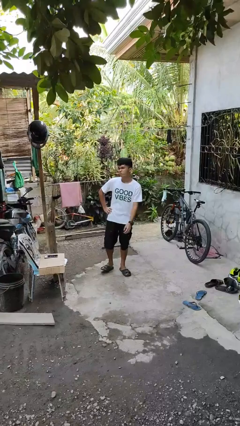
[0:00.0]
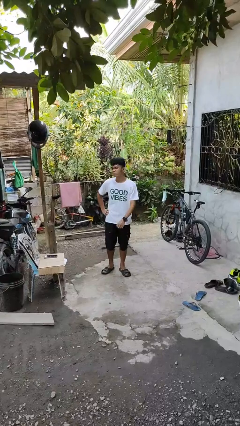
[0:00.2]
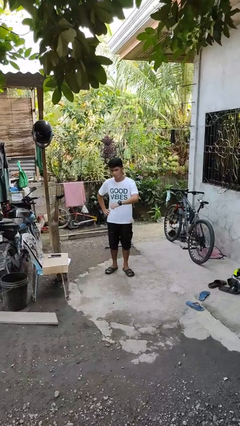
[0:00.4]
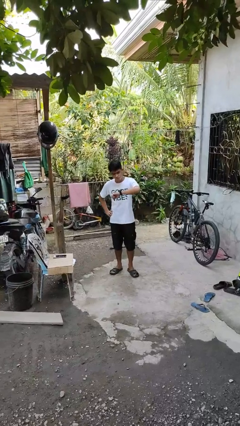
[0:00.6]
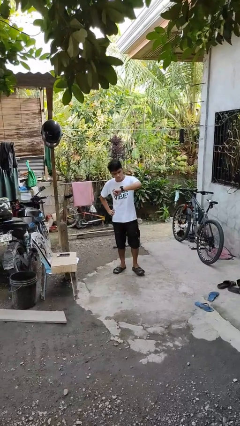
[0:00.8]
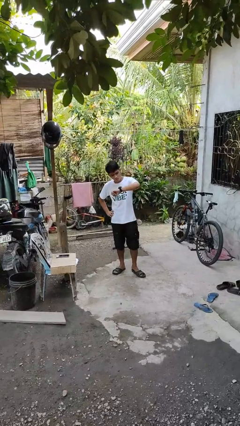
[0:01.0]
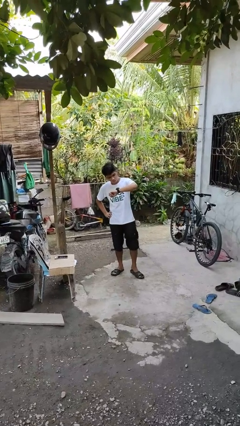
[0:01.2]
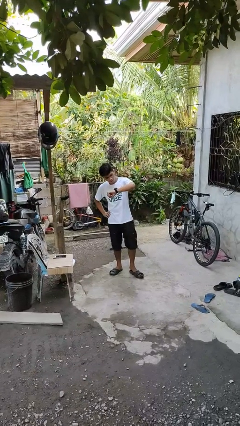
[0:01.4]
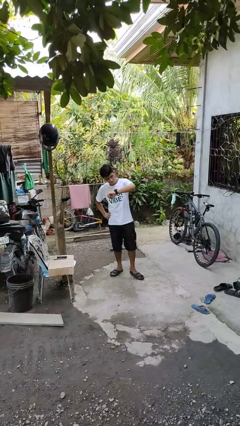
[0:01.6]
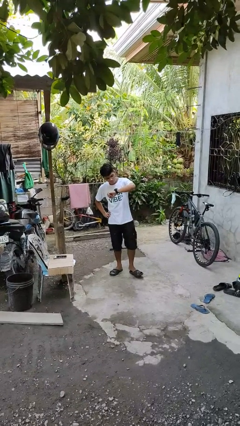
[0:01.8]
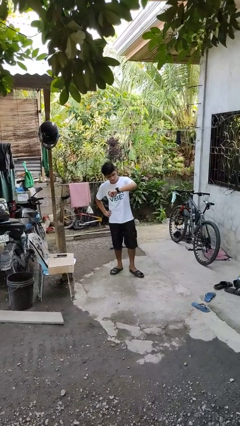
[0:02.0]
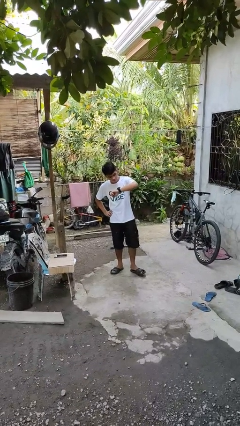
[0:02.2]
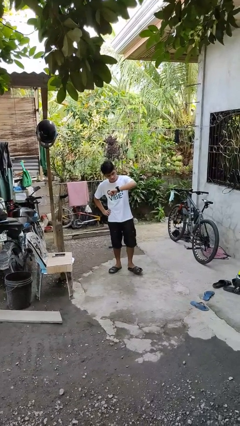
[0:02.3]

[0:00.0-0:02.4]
person looks at wristwatch

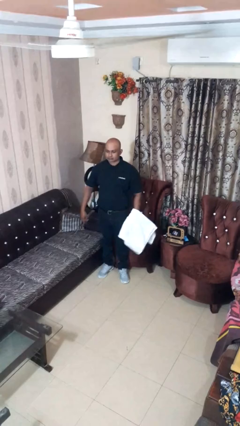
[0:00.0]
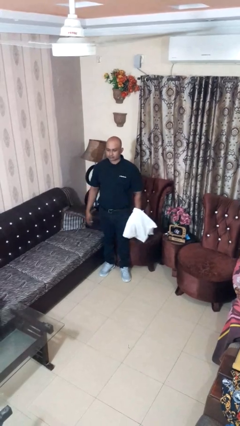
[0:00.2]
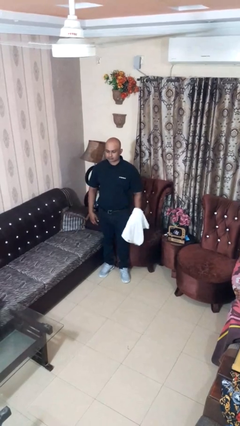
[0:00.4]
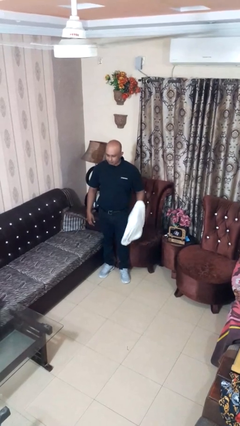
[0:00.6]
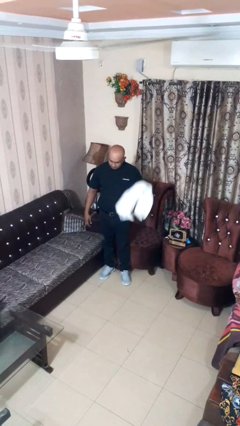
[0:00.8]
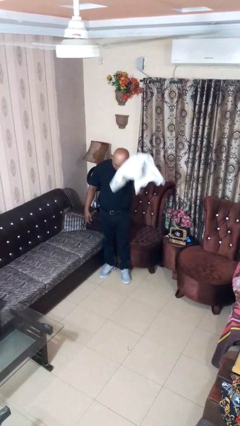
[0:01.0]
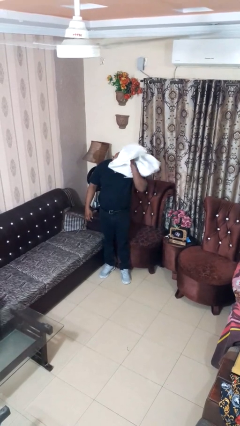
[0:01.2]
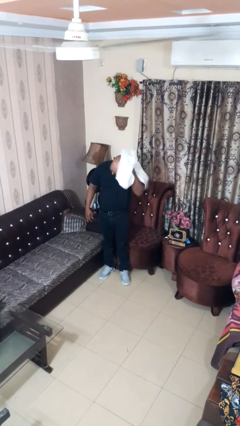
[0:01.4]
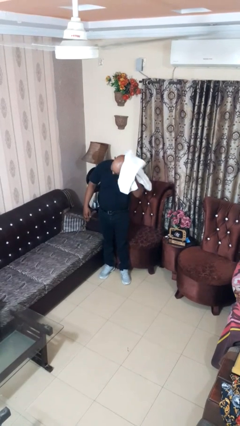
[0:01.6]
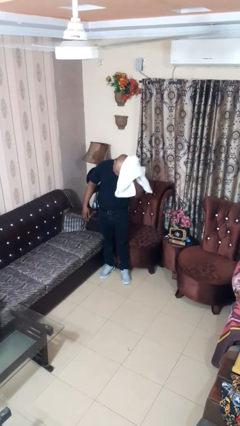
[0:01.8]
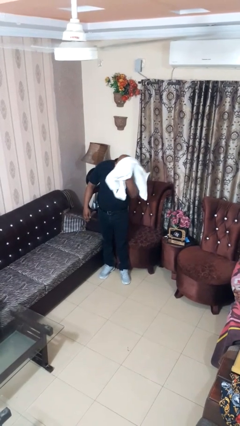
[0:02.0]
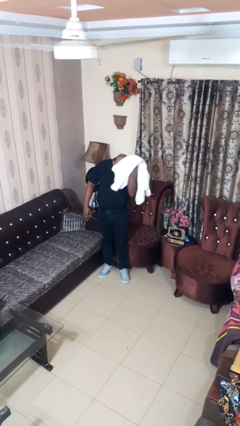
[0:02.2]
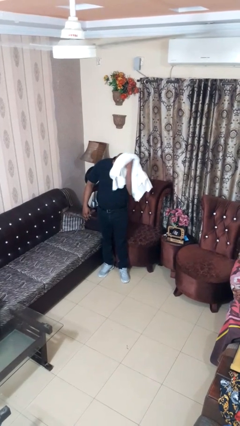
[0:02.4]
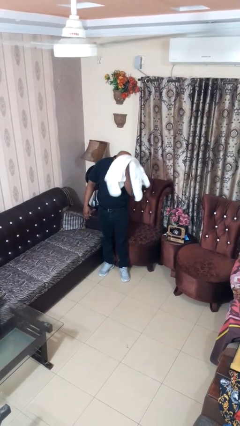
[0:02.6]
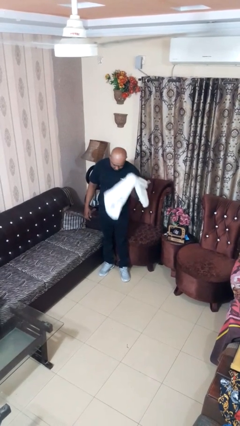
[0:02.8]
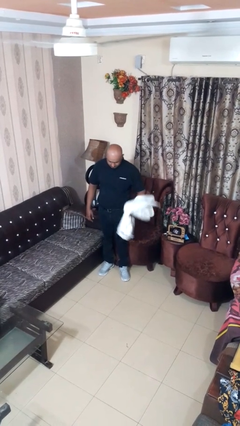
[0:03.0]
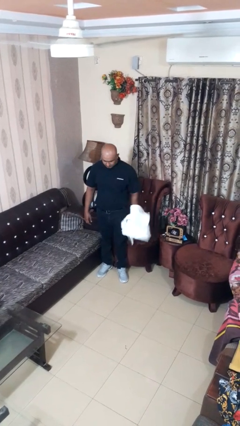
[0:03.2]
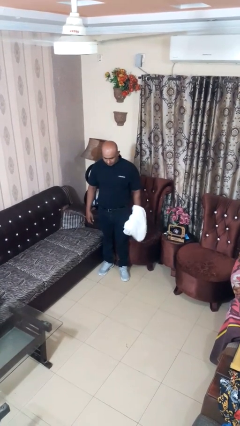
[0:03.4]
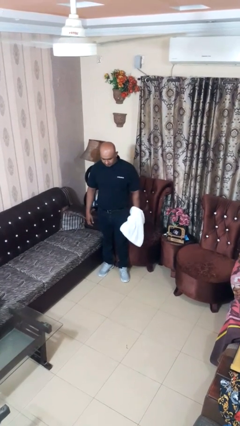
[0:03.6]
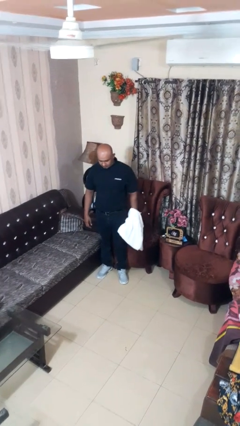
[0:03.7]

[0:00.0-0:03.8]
person dries hair with towel

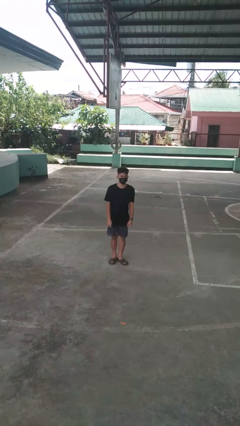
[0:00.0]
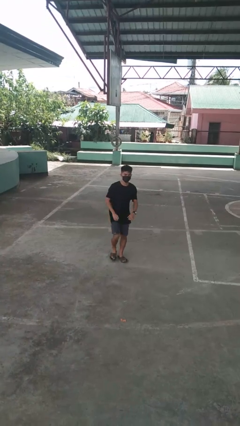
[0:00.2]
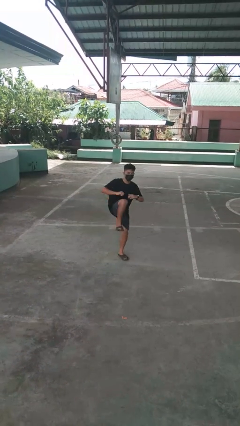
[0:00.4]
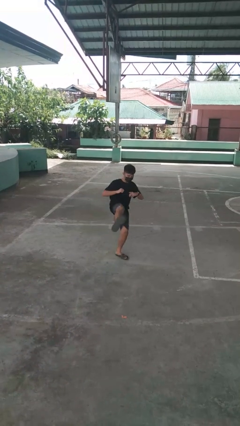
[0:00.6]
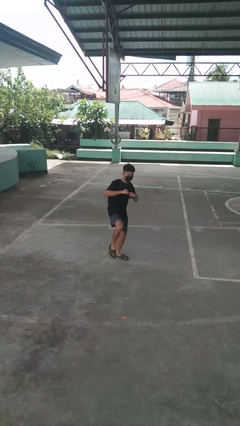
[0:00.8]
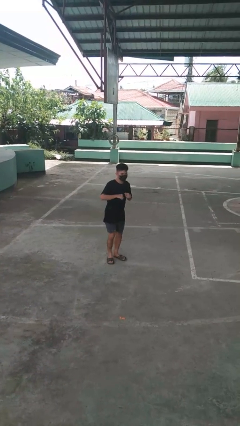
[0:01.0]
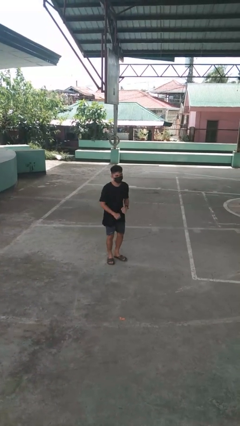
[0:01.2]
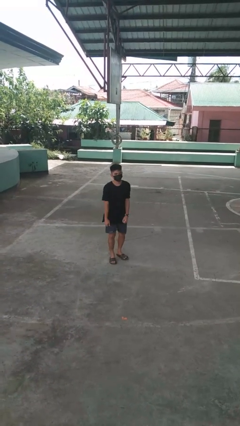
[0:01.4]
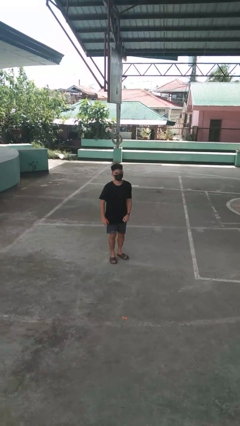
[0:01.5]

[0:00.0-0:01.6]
person karate kicks

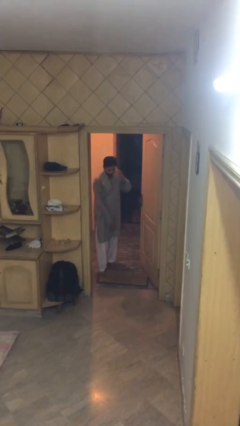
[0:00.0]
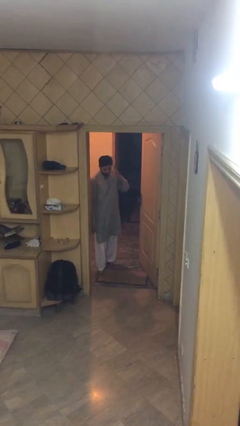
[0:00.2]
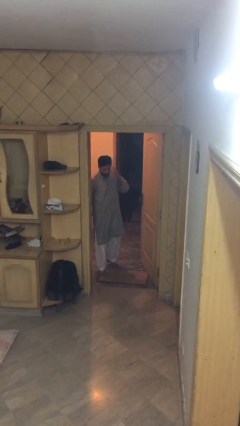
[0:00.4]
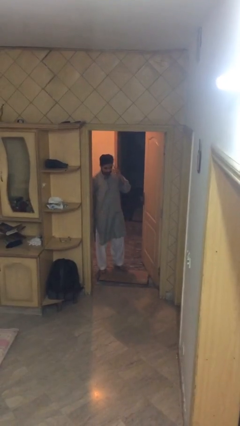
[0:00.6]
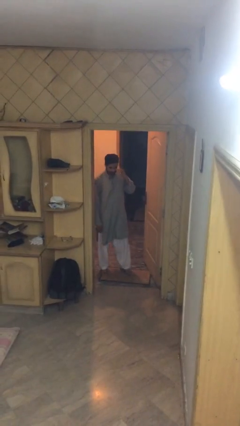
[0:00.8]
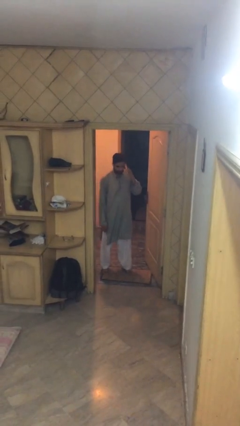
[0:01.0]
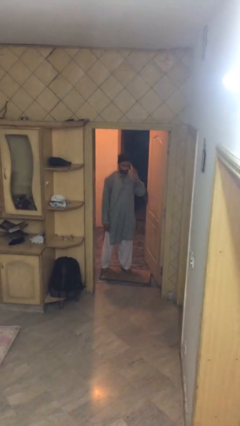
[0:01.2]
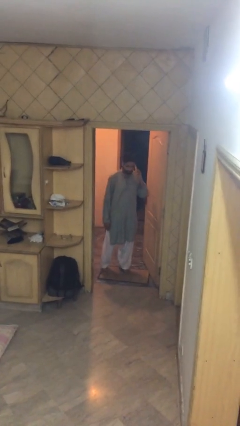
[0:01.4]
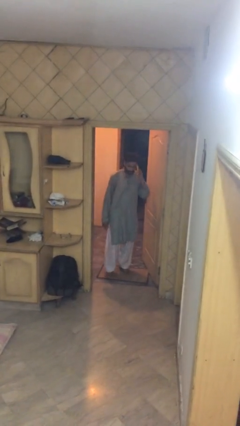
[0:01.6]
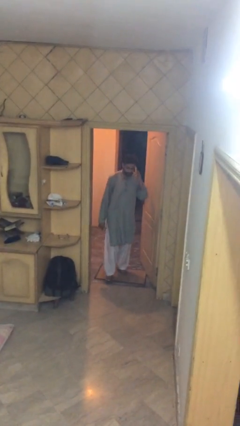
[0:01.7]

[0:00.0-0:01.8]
person enters scene through structure

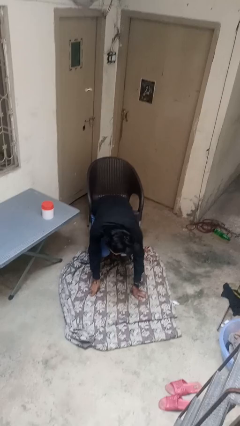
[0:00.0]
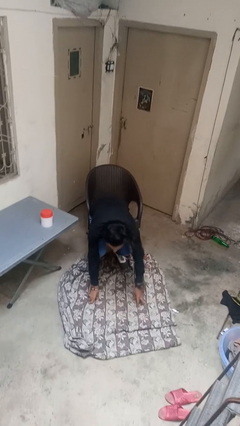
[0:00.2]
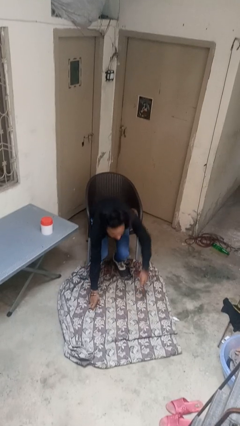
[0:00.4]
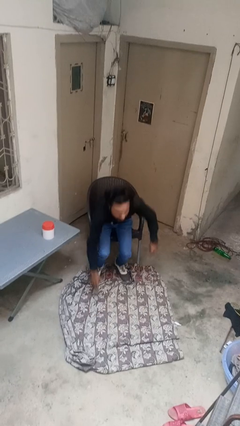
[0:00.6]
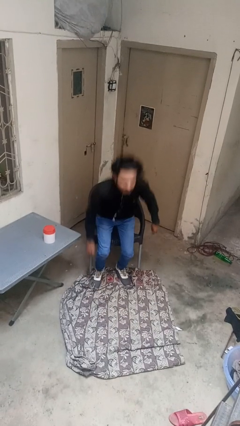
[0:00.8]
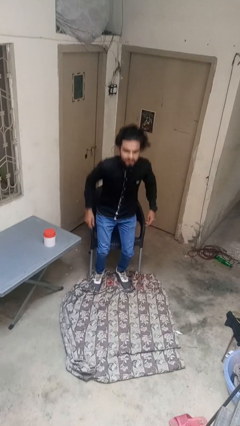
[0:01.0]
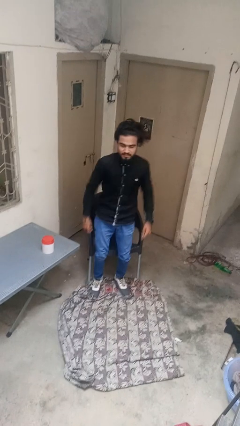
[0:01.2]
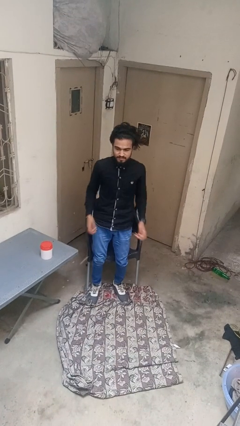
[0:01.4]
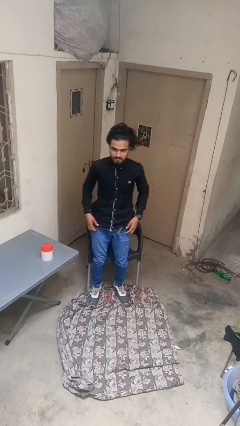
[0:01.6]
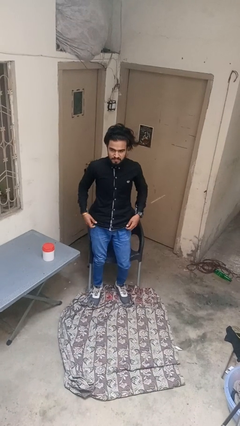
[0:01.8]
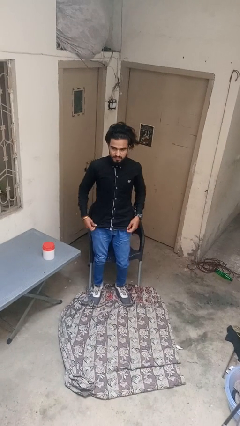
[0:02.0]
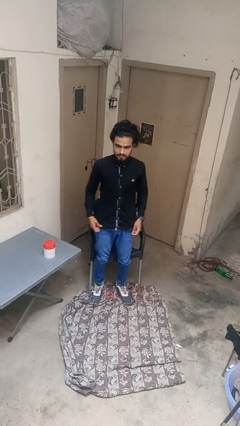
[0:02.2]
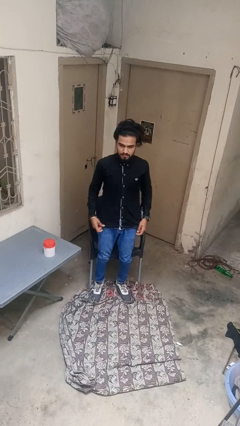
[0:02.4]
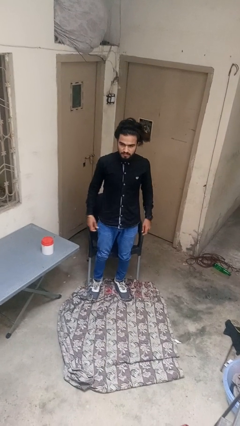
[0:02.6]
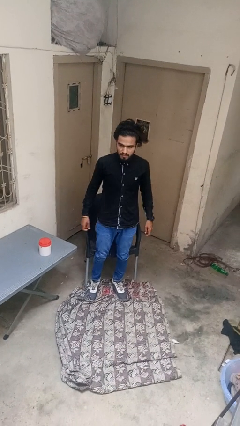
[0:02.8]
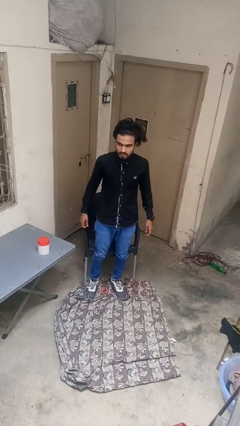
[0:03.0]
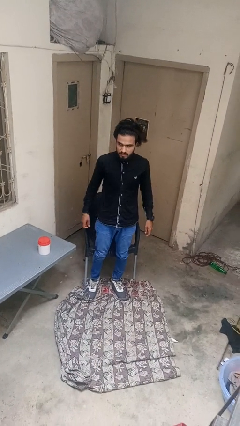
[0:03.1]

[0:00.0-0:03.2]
person stands up from floor

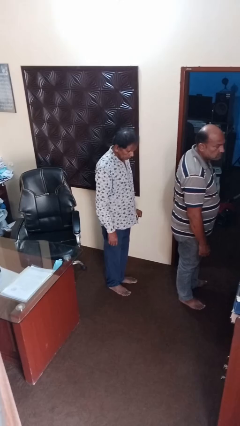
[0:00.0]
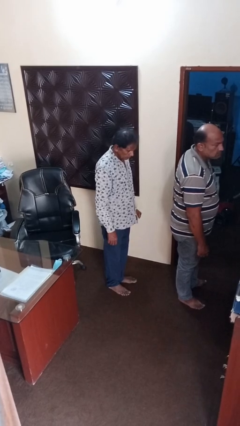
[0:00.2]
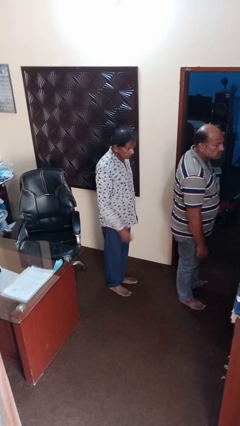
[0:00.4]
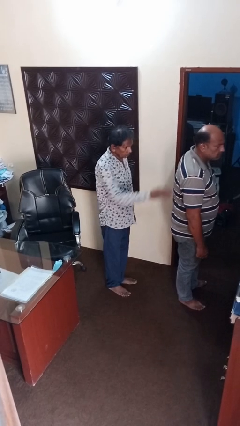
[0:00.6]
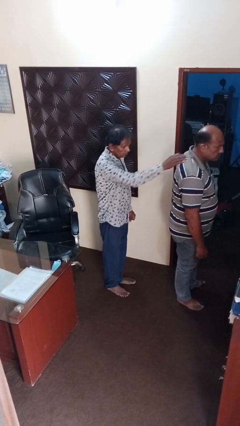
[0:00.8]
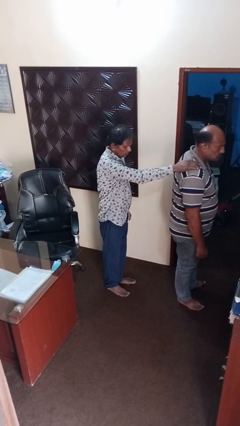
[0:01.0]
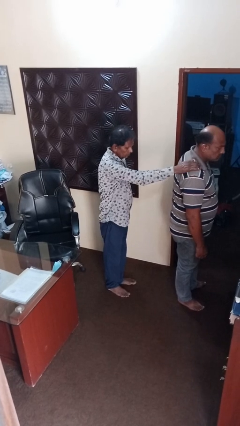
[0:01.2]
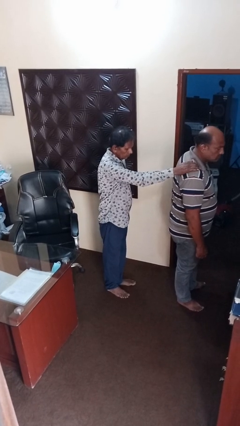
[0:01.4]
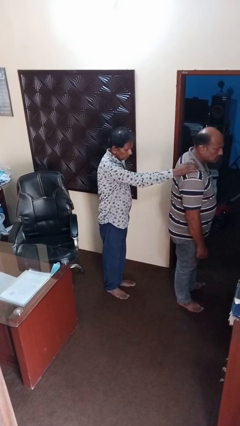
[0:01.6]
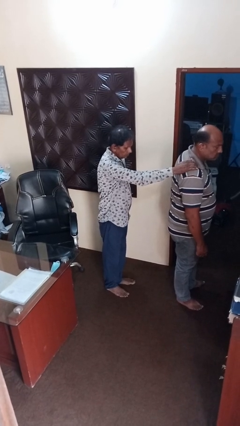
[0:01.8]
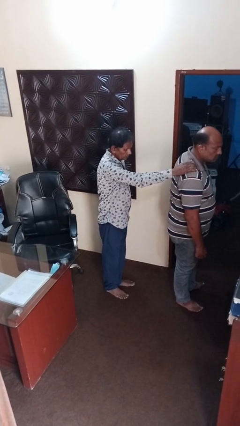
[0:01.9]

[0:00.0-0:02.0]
person grabs person by shoulder

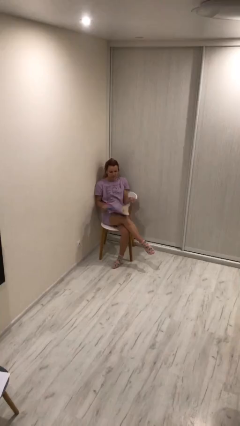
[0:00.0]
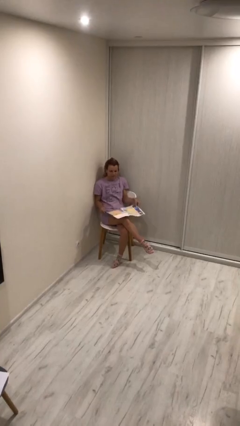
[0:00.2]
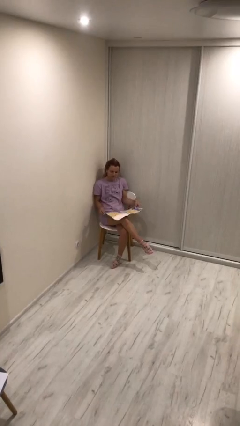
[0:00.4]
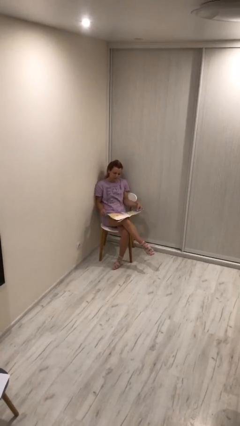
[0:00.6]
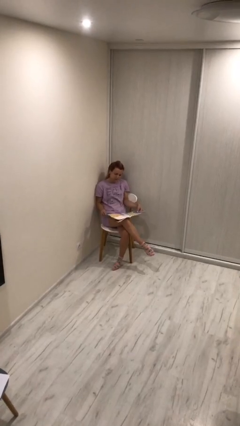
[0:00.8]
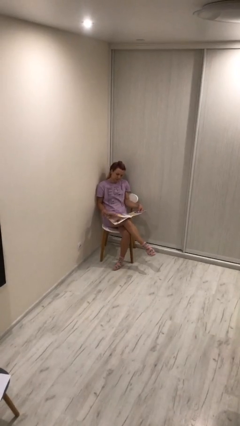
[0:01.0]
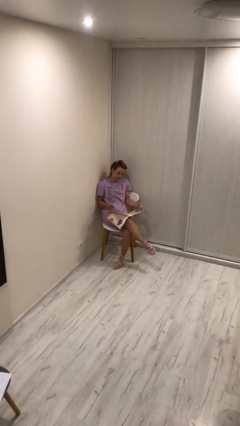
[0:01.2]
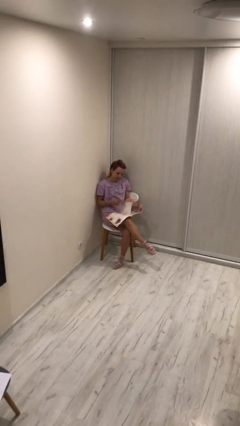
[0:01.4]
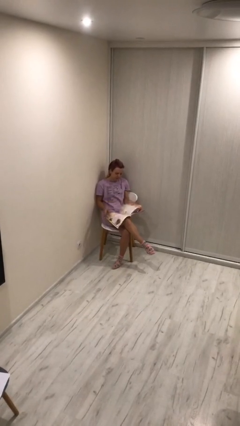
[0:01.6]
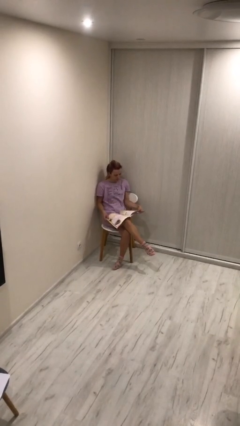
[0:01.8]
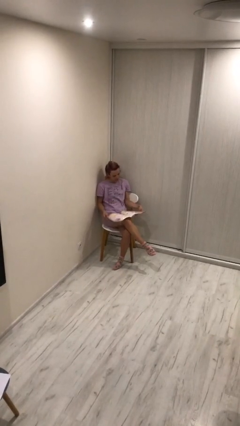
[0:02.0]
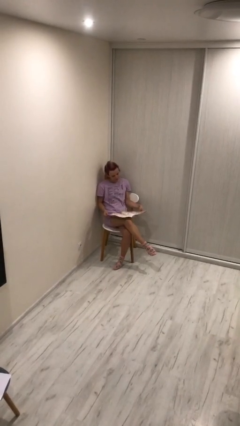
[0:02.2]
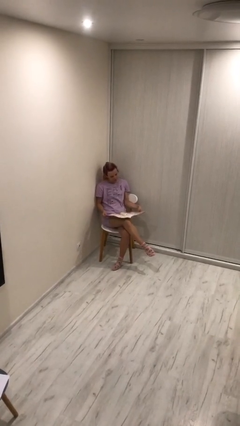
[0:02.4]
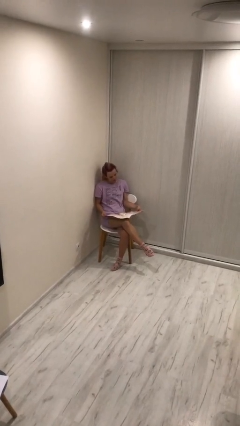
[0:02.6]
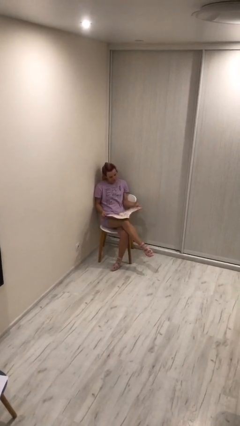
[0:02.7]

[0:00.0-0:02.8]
person reads magazine
